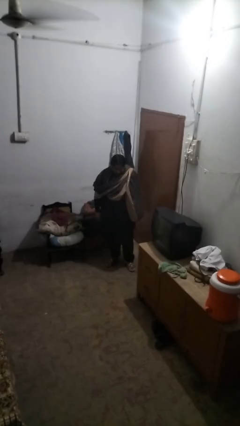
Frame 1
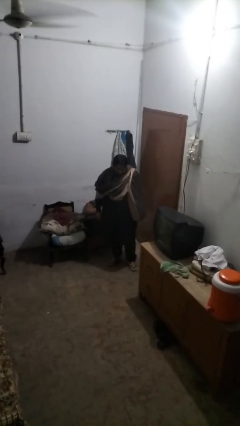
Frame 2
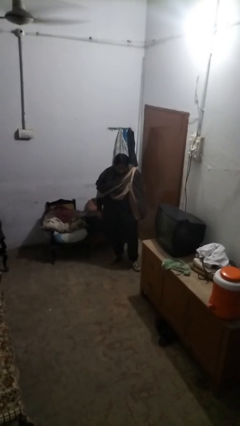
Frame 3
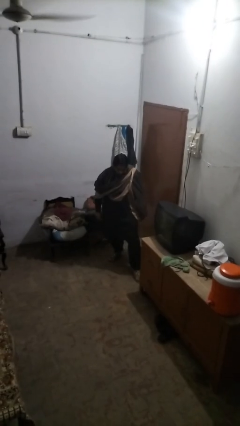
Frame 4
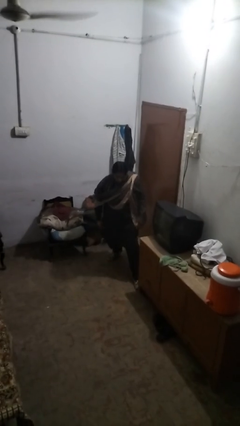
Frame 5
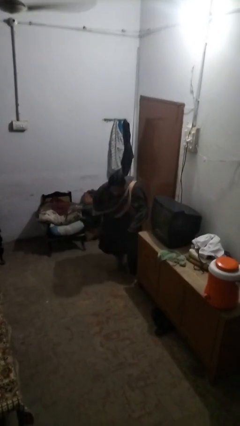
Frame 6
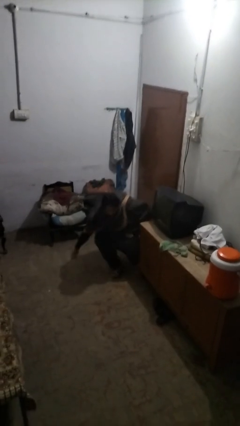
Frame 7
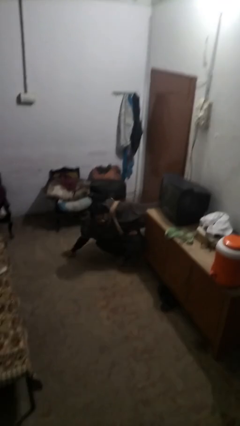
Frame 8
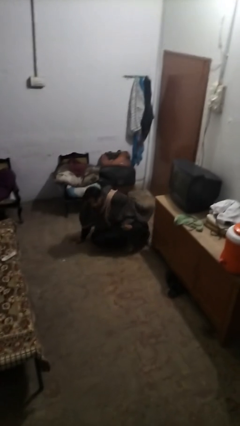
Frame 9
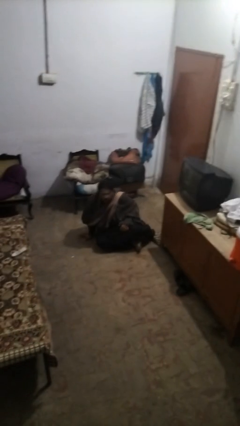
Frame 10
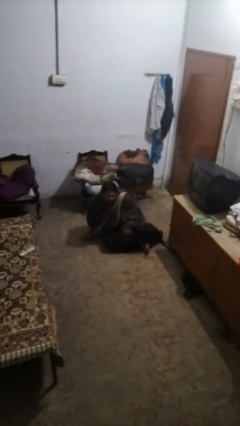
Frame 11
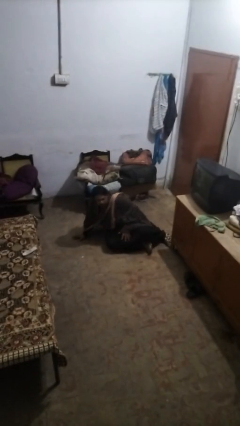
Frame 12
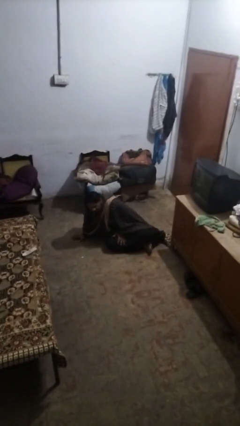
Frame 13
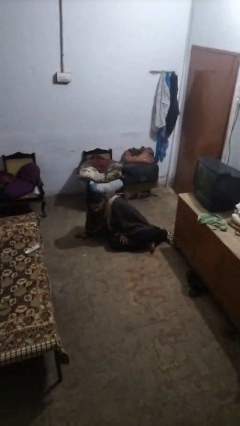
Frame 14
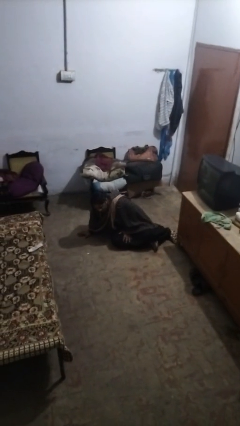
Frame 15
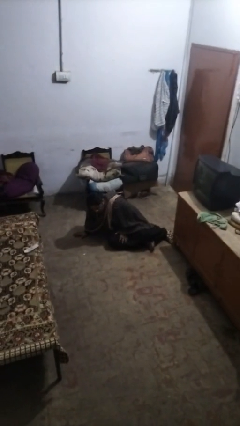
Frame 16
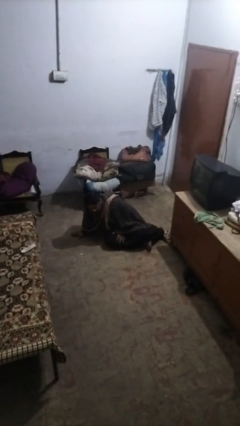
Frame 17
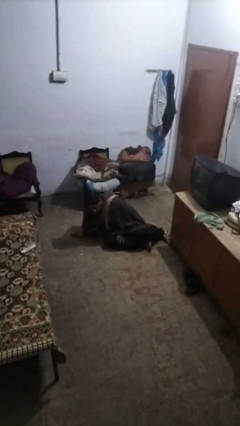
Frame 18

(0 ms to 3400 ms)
person trips on object on floor

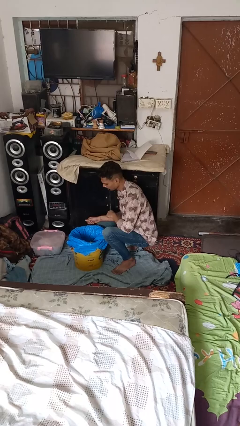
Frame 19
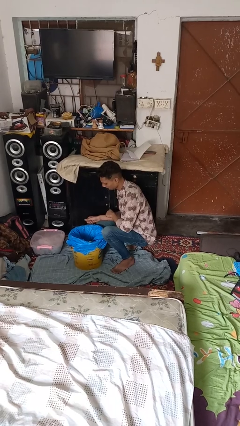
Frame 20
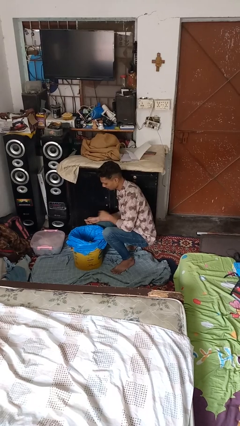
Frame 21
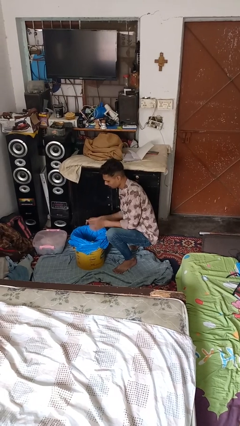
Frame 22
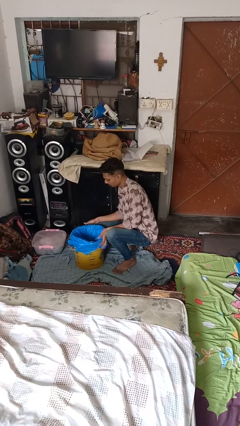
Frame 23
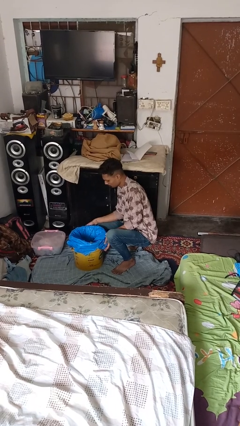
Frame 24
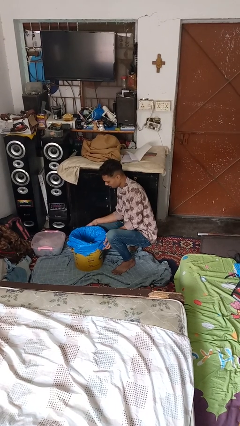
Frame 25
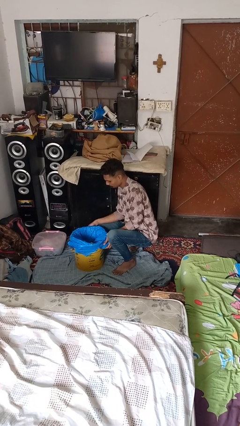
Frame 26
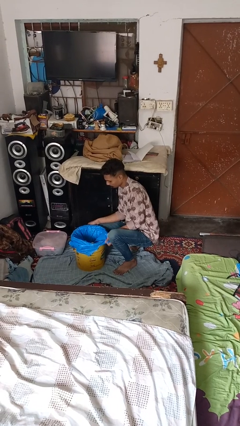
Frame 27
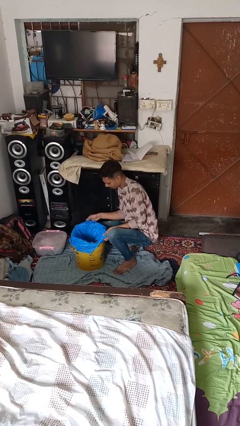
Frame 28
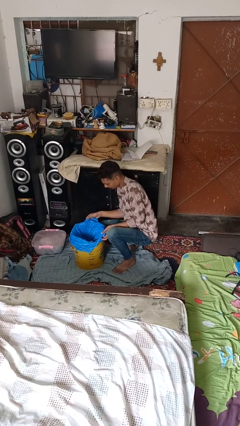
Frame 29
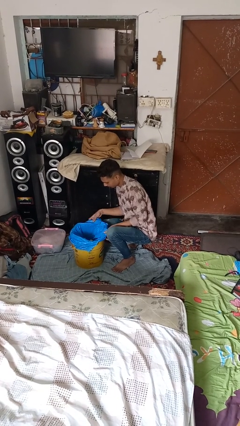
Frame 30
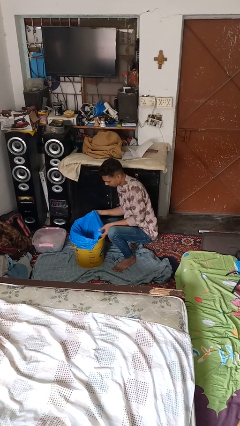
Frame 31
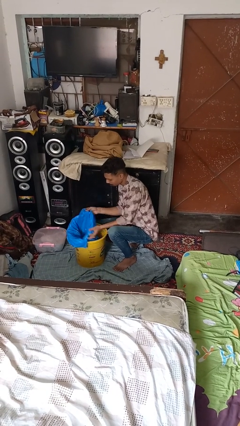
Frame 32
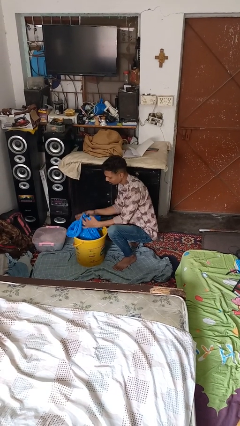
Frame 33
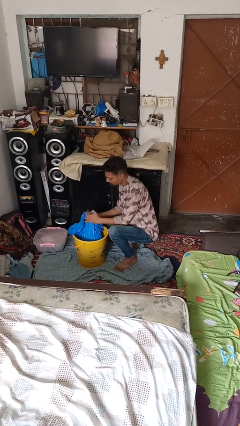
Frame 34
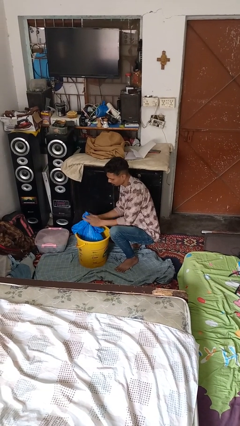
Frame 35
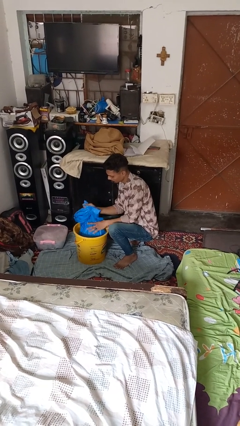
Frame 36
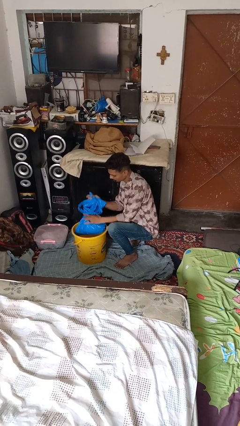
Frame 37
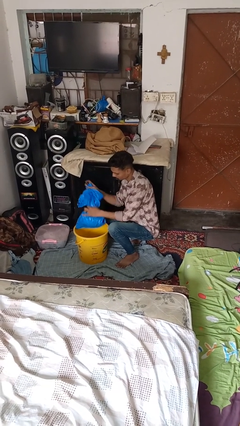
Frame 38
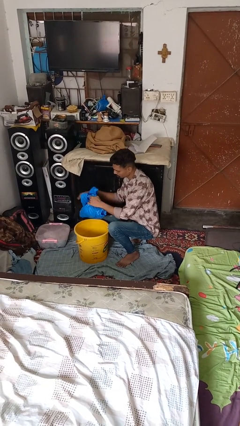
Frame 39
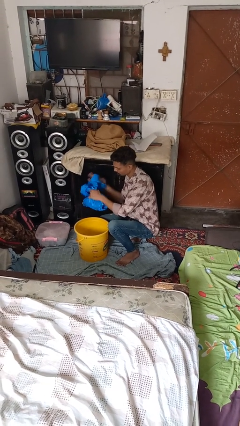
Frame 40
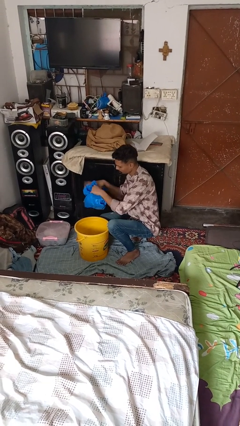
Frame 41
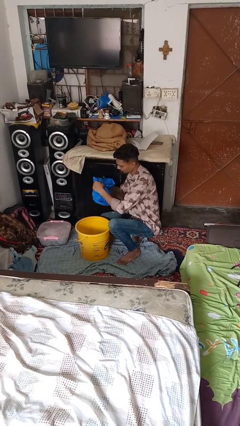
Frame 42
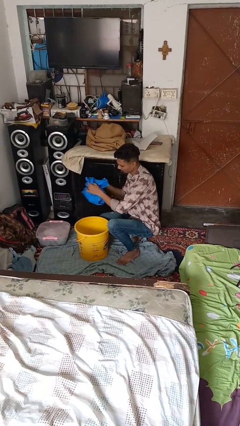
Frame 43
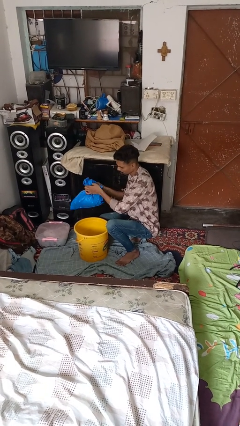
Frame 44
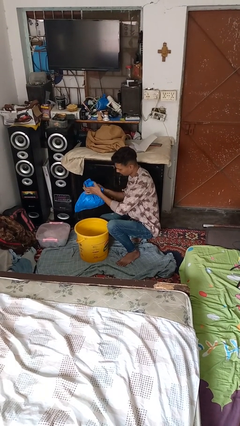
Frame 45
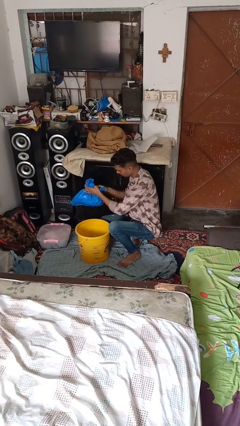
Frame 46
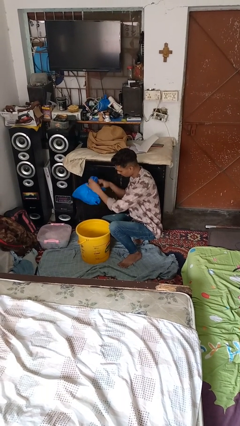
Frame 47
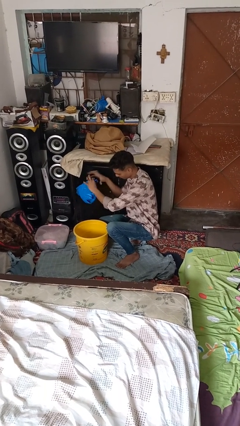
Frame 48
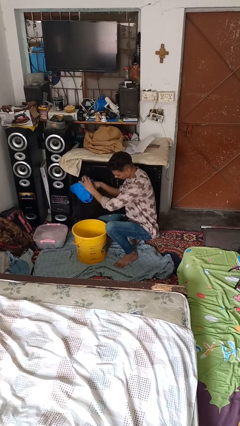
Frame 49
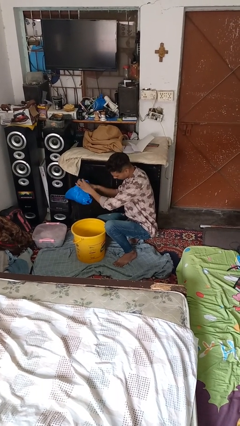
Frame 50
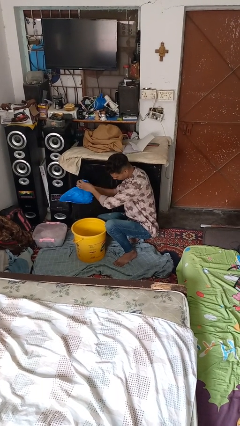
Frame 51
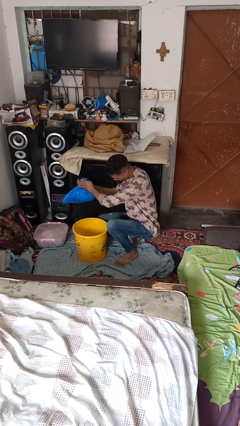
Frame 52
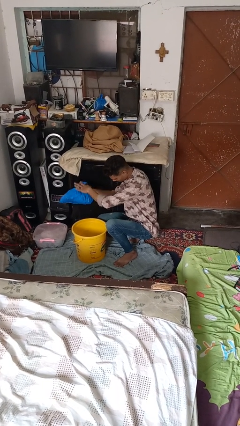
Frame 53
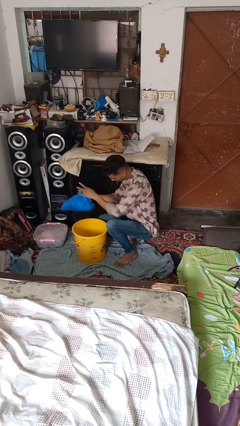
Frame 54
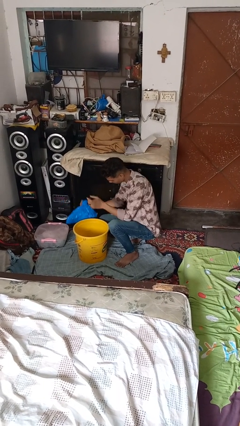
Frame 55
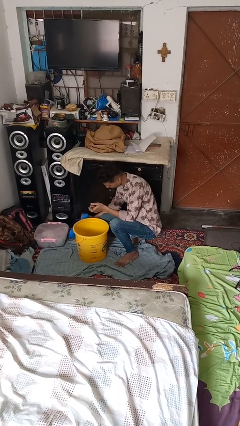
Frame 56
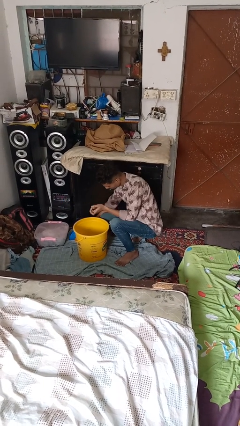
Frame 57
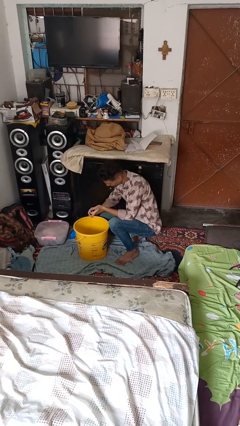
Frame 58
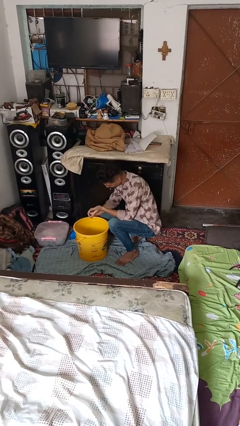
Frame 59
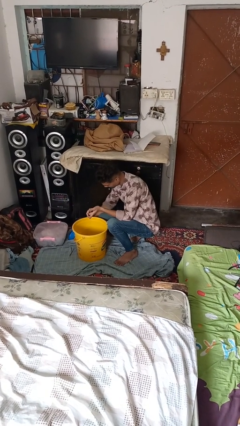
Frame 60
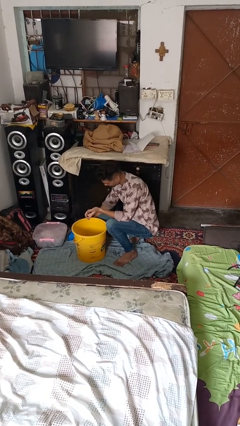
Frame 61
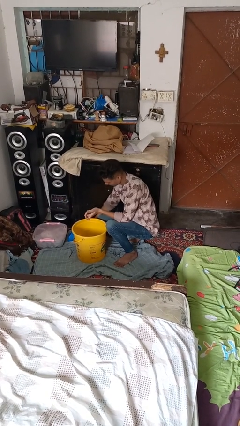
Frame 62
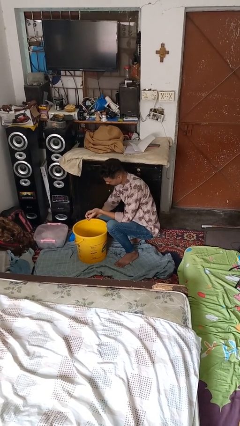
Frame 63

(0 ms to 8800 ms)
person removes trashbag from trashcan

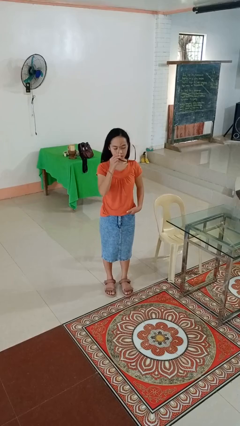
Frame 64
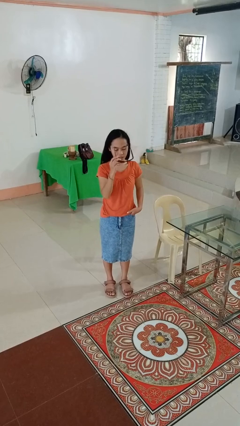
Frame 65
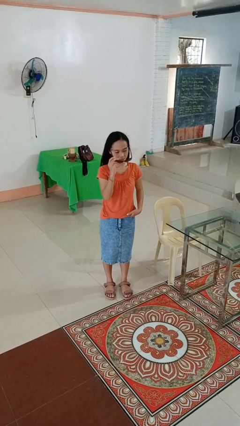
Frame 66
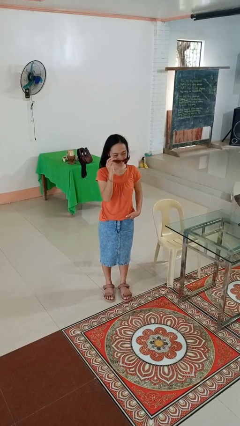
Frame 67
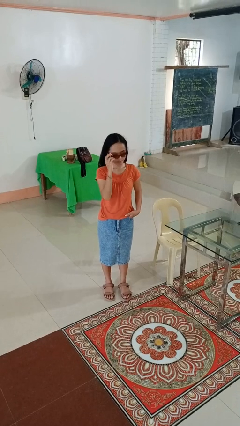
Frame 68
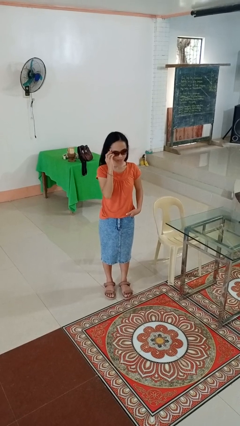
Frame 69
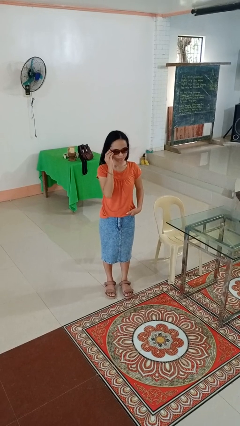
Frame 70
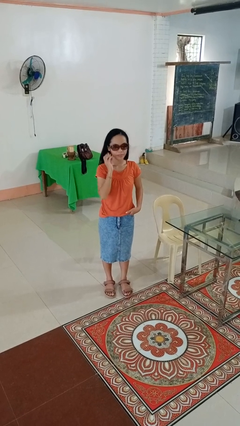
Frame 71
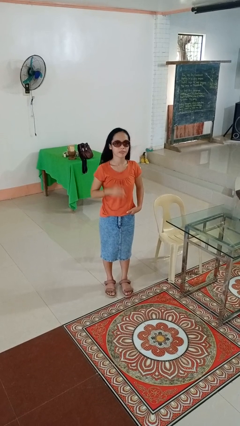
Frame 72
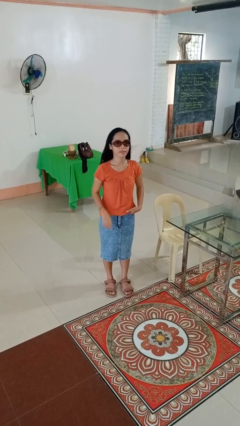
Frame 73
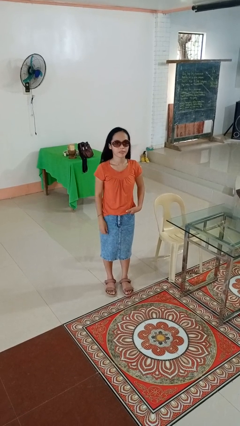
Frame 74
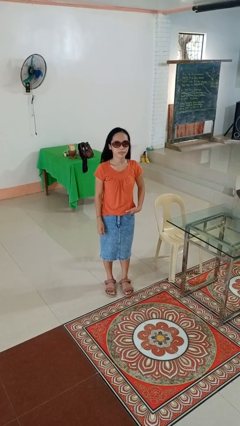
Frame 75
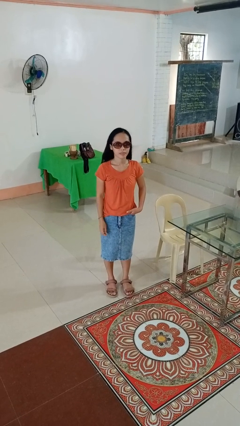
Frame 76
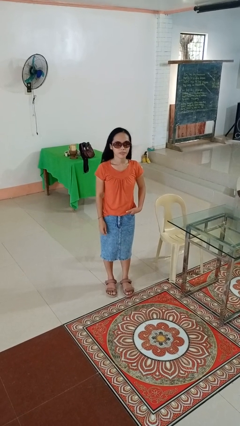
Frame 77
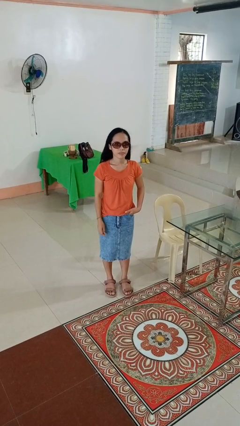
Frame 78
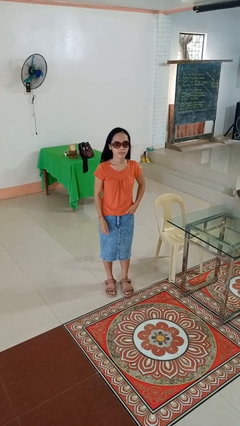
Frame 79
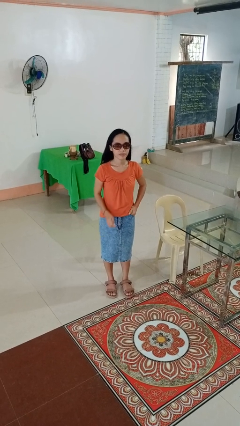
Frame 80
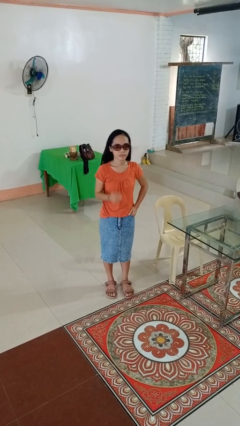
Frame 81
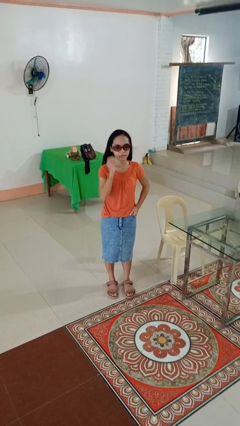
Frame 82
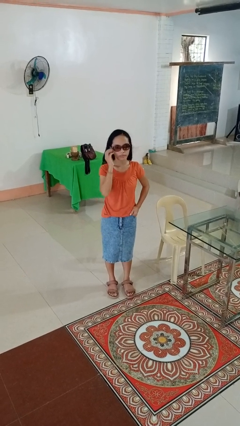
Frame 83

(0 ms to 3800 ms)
person puts on sunglasses

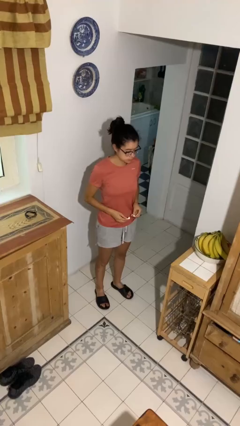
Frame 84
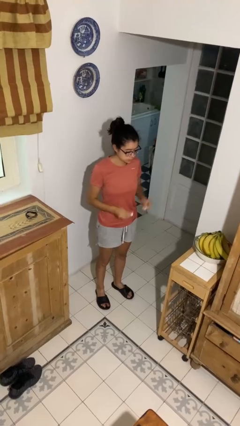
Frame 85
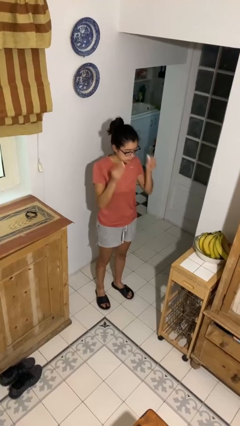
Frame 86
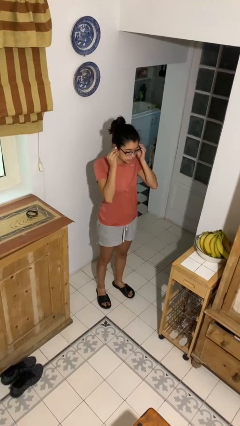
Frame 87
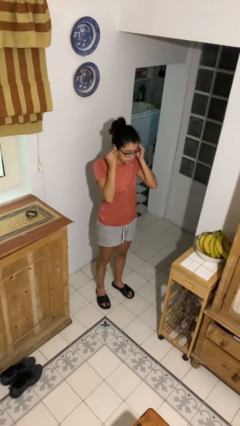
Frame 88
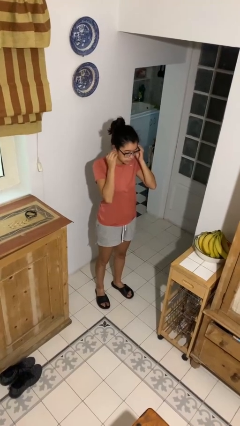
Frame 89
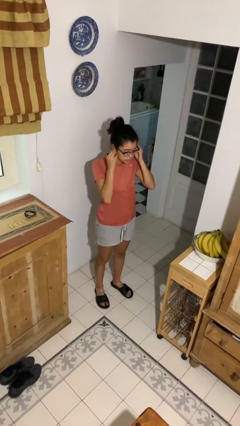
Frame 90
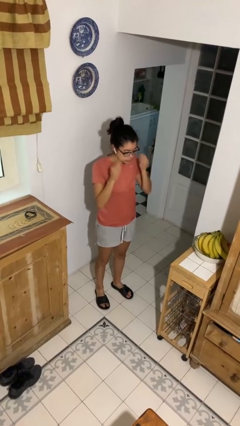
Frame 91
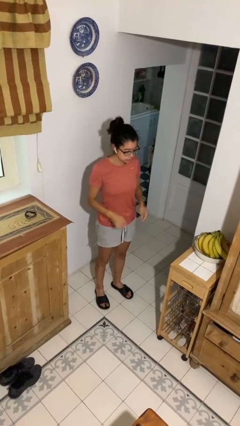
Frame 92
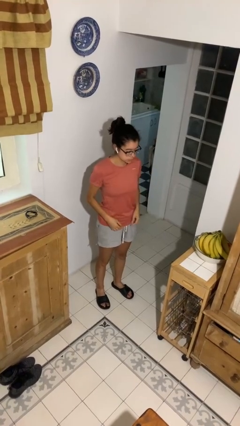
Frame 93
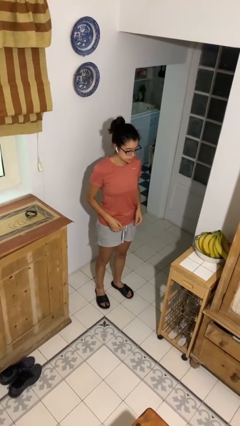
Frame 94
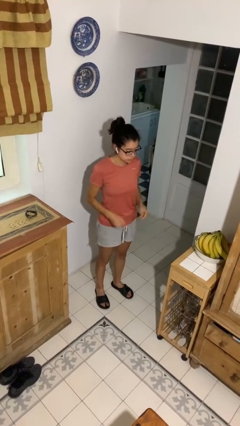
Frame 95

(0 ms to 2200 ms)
person puts on headphones
